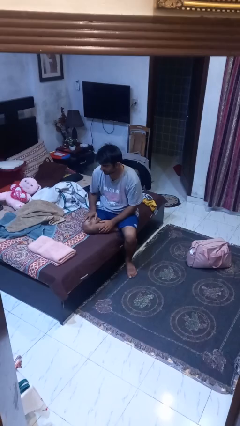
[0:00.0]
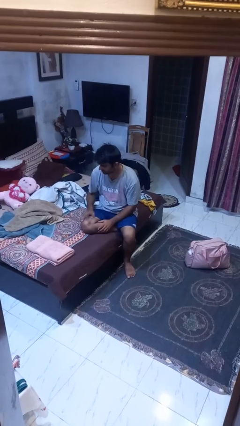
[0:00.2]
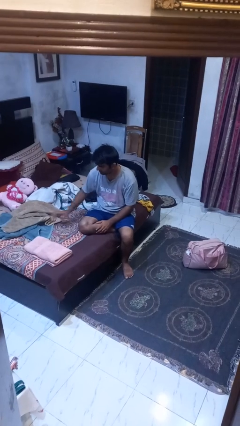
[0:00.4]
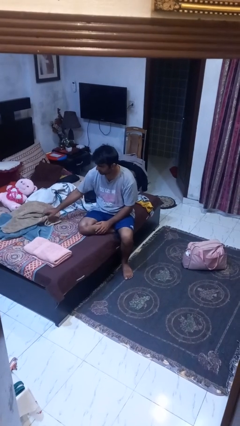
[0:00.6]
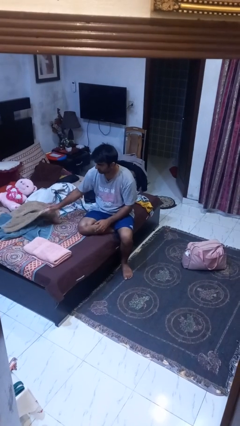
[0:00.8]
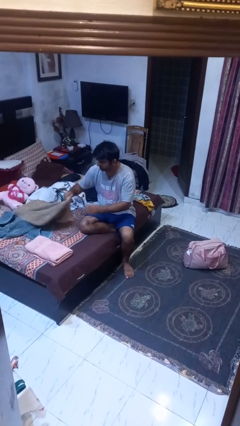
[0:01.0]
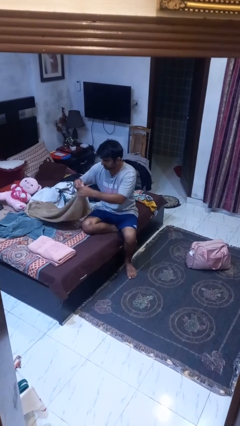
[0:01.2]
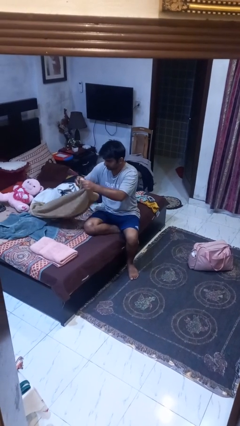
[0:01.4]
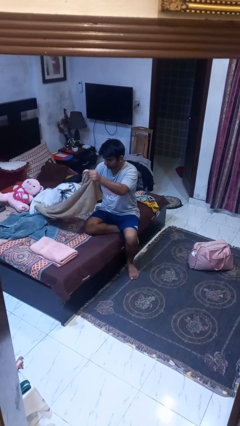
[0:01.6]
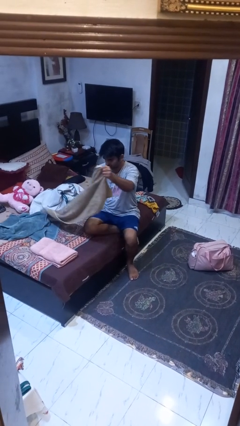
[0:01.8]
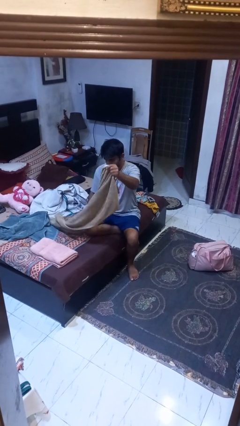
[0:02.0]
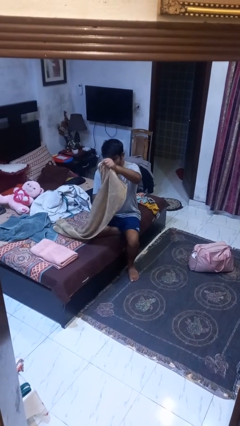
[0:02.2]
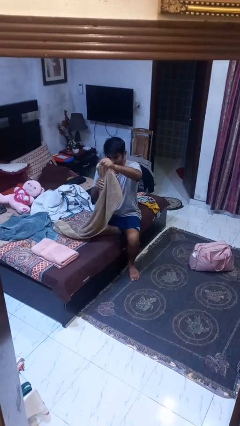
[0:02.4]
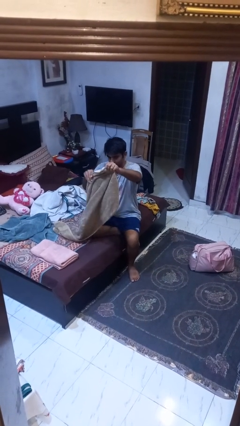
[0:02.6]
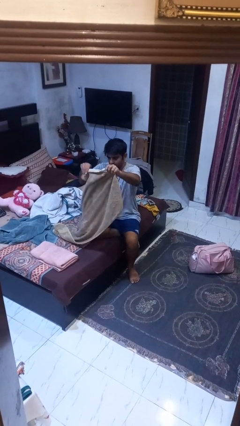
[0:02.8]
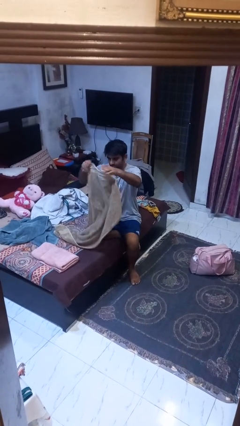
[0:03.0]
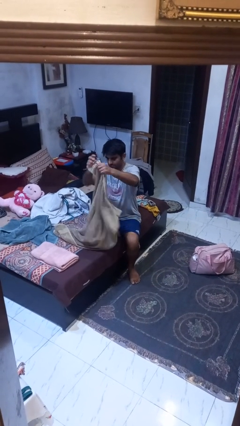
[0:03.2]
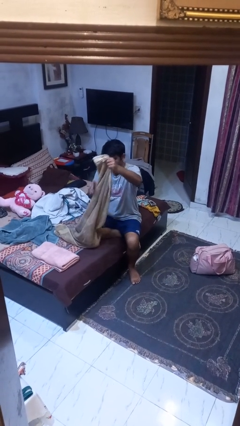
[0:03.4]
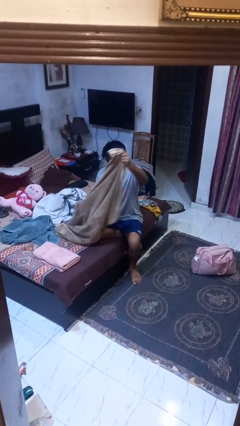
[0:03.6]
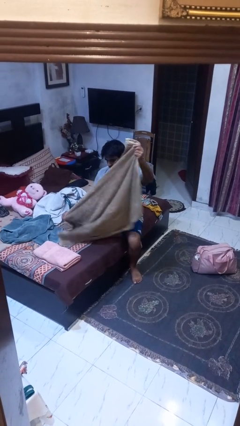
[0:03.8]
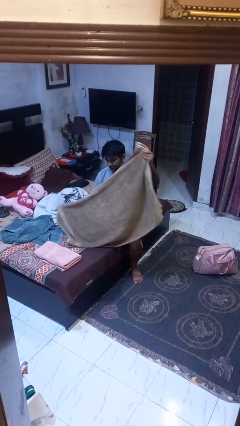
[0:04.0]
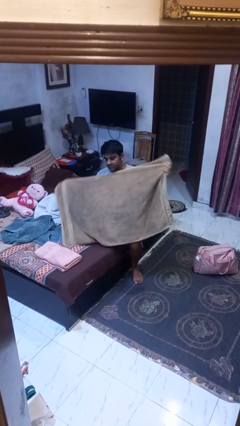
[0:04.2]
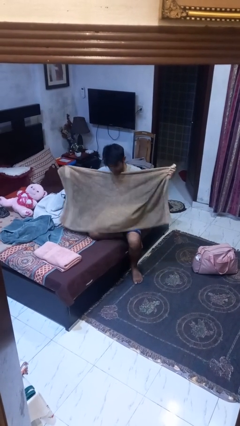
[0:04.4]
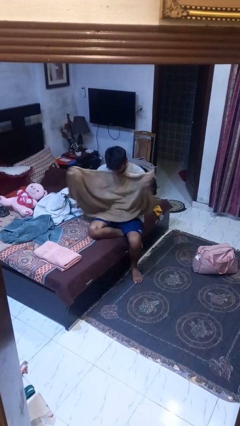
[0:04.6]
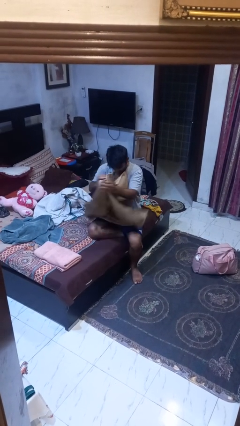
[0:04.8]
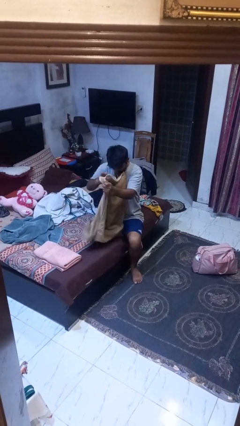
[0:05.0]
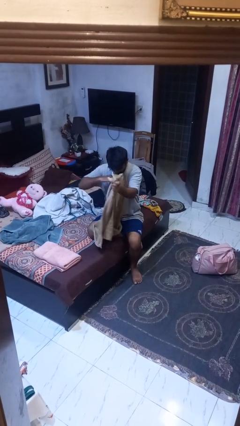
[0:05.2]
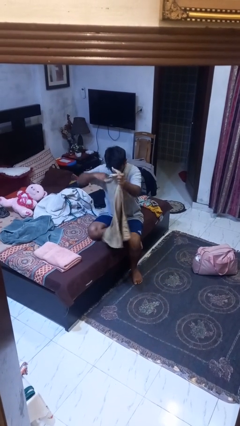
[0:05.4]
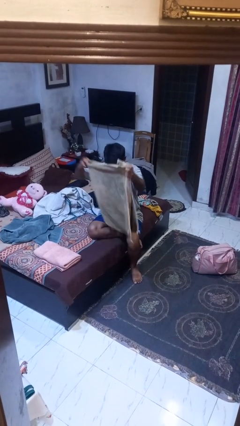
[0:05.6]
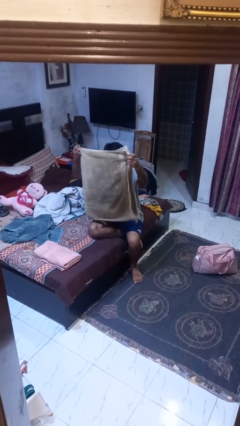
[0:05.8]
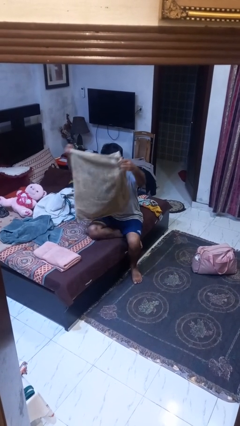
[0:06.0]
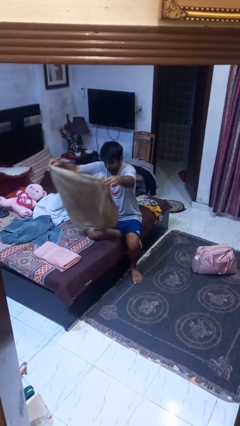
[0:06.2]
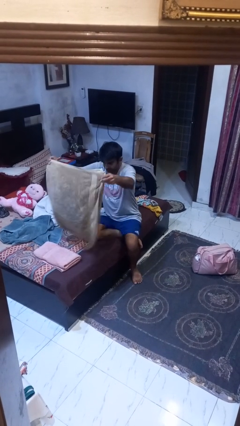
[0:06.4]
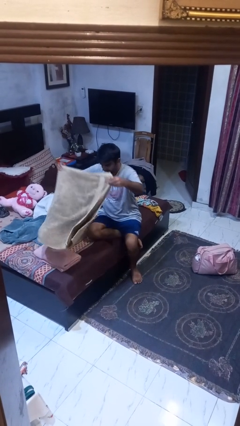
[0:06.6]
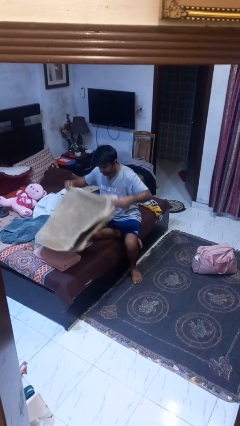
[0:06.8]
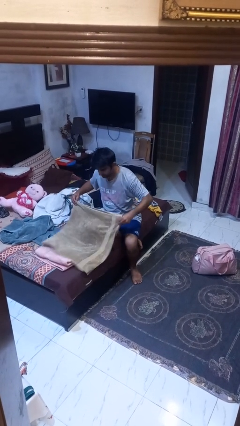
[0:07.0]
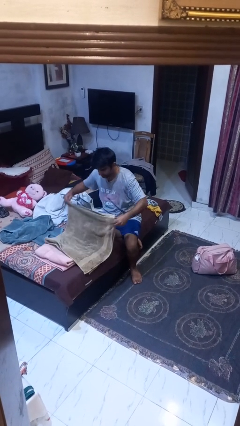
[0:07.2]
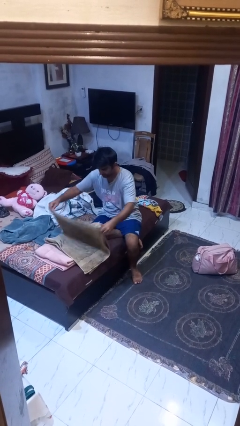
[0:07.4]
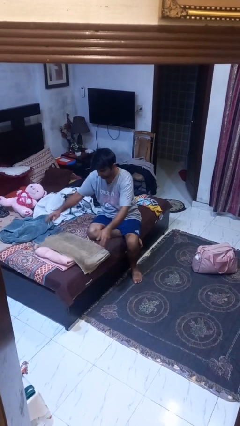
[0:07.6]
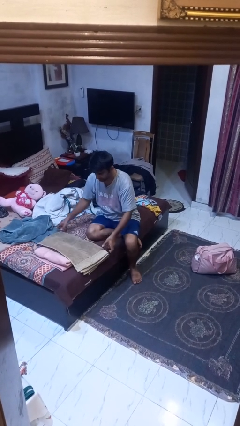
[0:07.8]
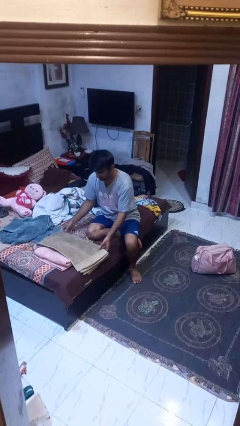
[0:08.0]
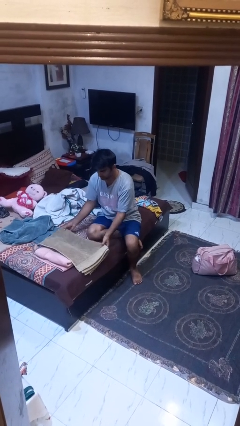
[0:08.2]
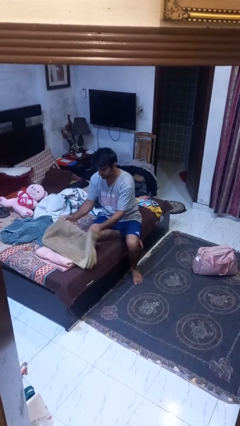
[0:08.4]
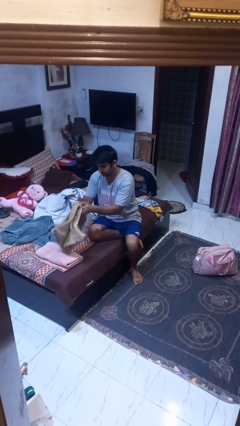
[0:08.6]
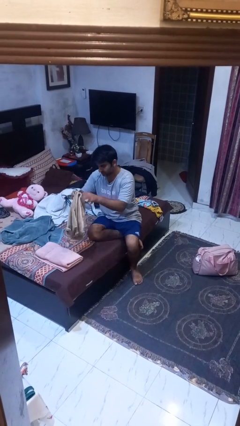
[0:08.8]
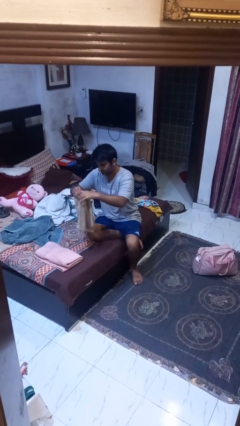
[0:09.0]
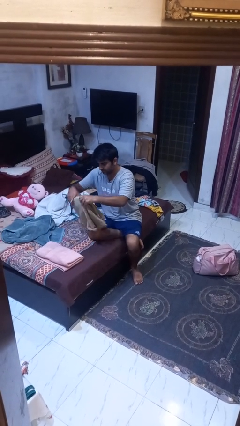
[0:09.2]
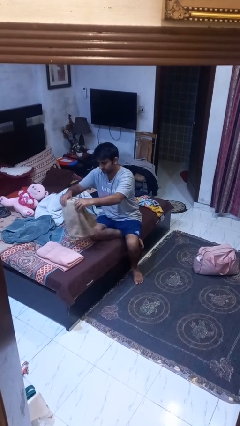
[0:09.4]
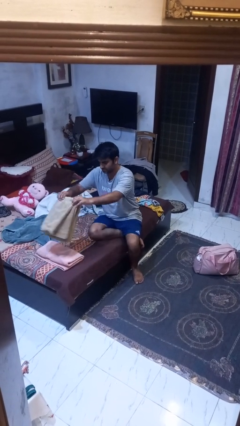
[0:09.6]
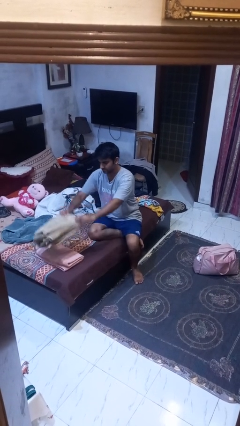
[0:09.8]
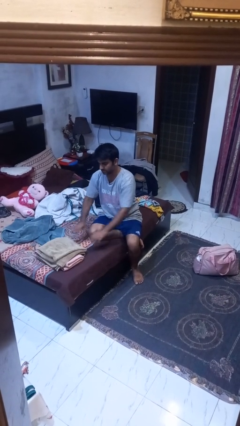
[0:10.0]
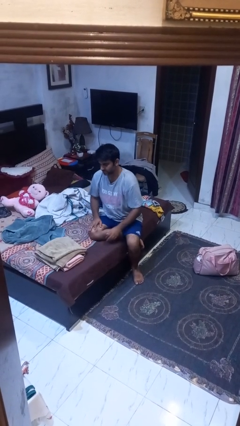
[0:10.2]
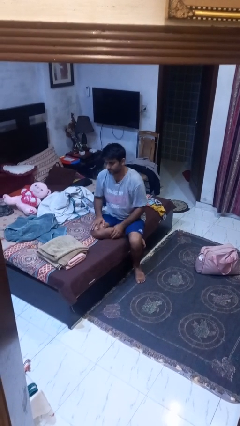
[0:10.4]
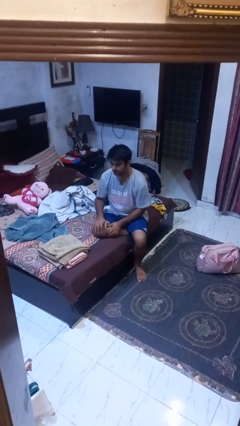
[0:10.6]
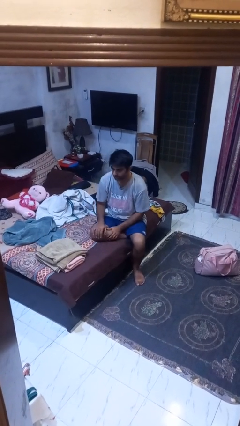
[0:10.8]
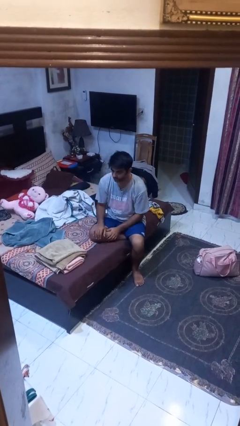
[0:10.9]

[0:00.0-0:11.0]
person folds towel

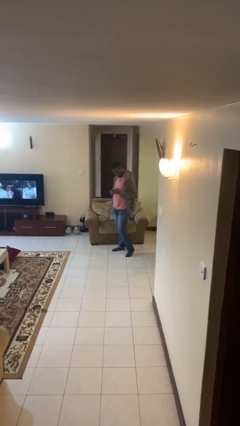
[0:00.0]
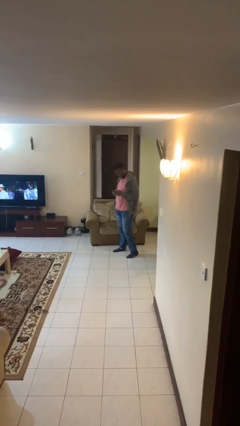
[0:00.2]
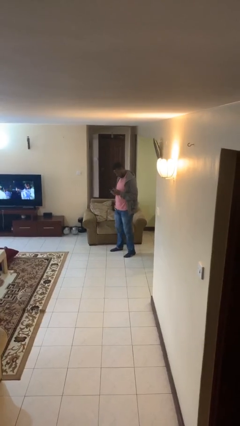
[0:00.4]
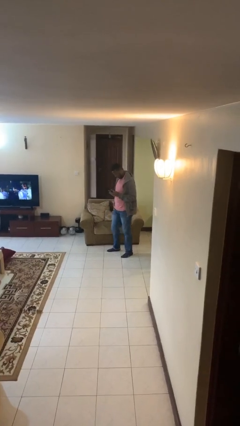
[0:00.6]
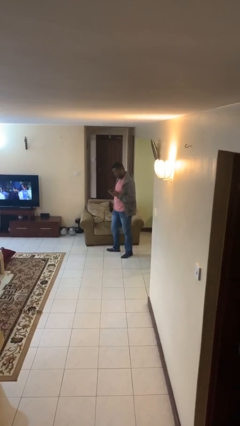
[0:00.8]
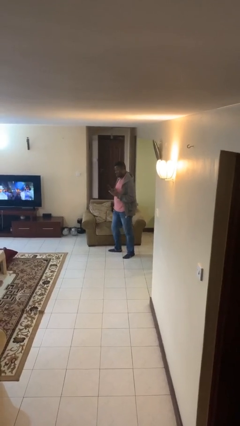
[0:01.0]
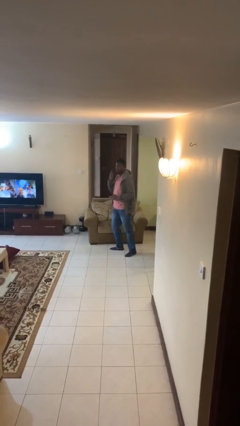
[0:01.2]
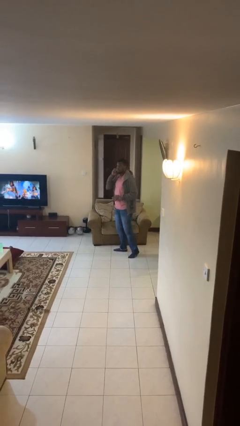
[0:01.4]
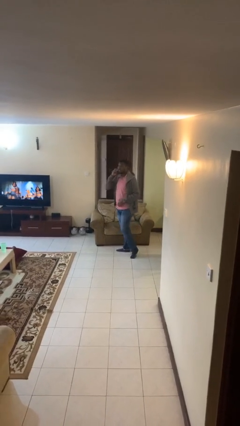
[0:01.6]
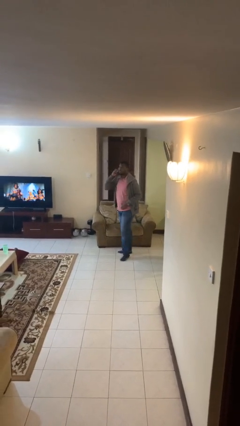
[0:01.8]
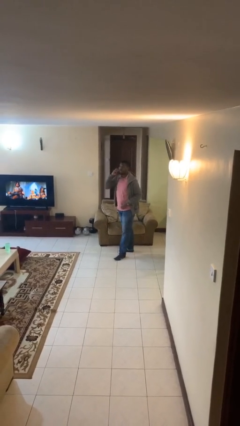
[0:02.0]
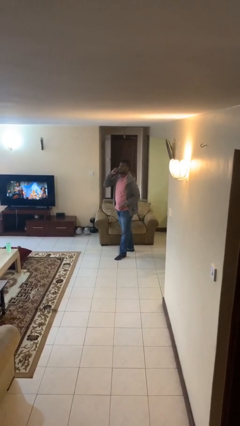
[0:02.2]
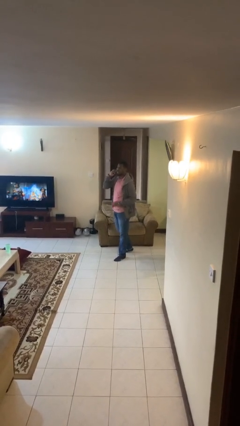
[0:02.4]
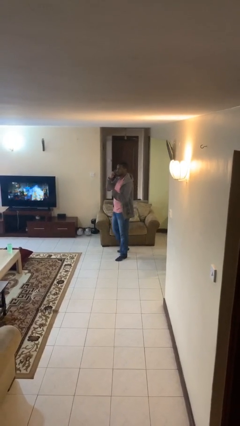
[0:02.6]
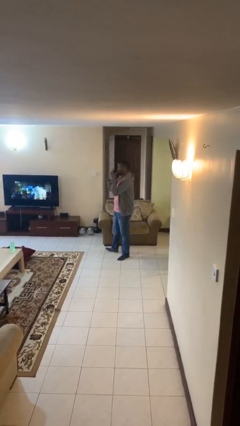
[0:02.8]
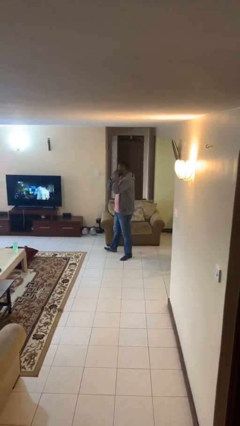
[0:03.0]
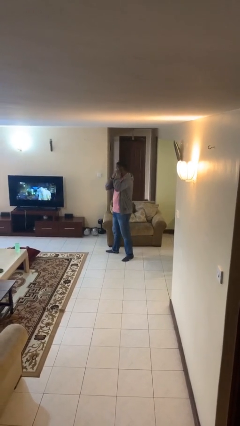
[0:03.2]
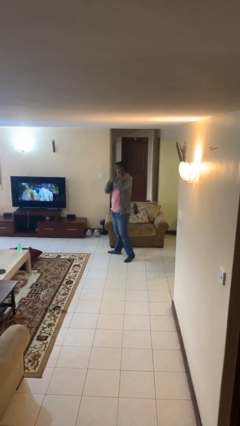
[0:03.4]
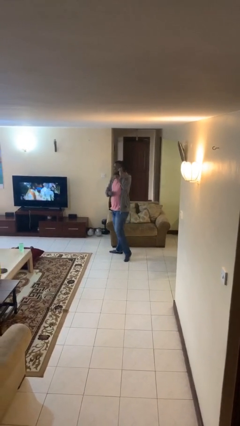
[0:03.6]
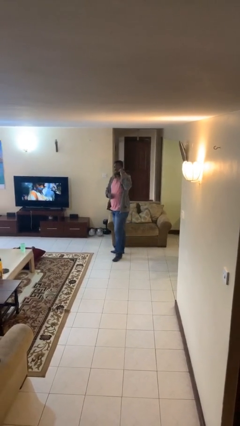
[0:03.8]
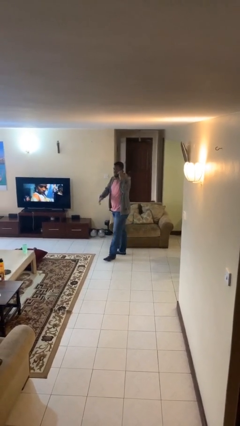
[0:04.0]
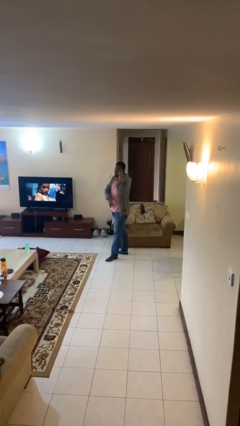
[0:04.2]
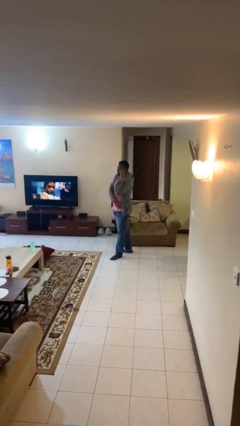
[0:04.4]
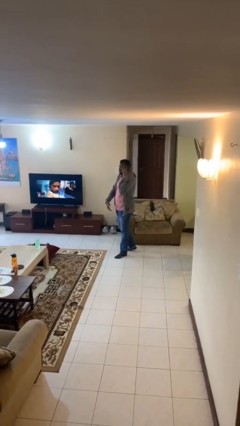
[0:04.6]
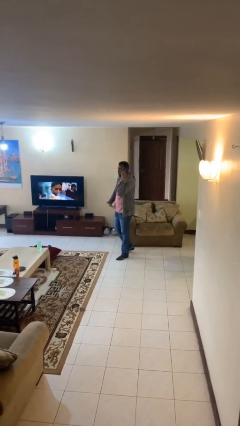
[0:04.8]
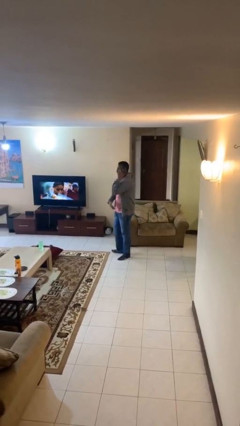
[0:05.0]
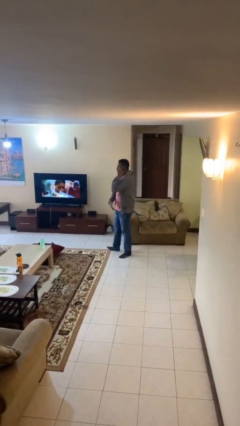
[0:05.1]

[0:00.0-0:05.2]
person talks on phone

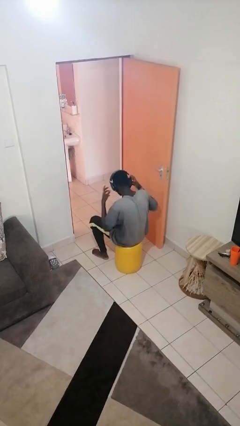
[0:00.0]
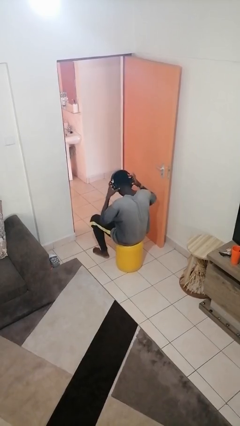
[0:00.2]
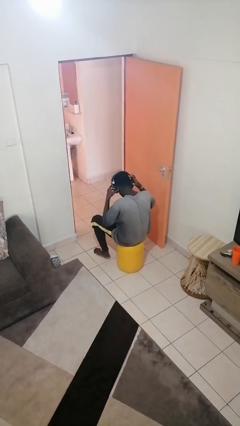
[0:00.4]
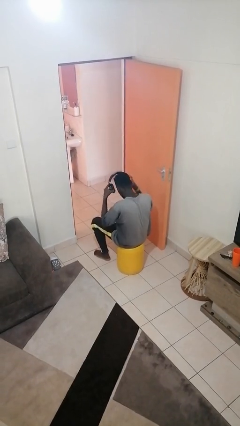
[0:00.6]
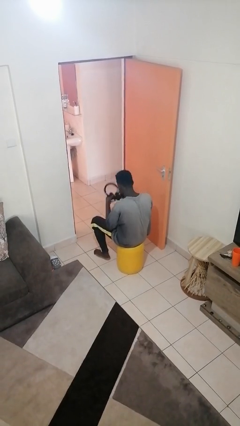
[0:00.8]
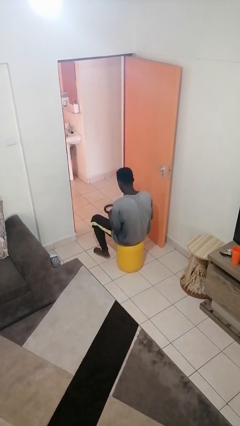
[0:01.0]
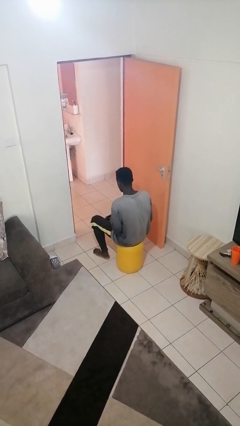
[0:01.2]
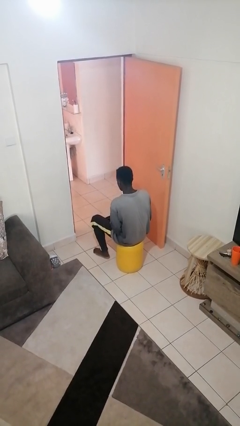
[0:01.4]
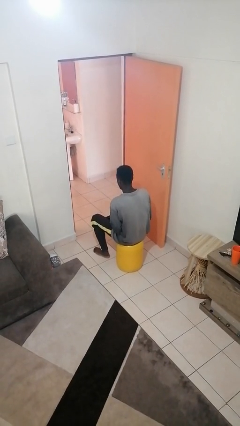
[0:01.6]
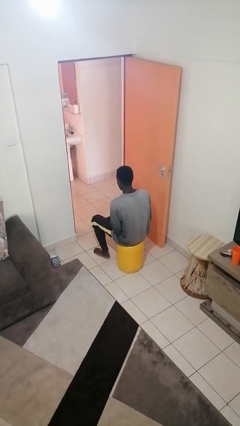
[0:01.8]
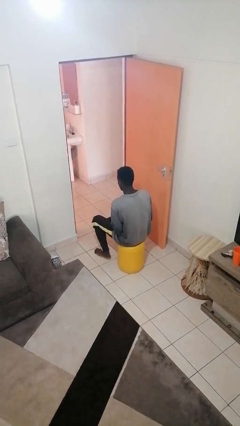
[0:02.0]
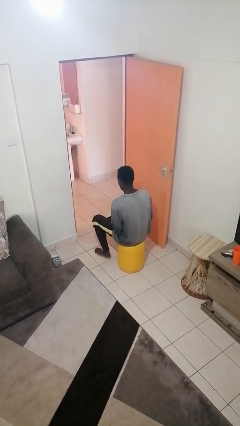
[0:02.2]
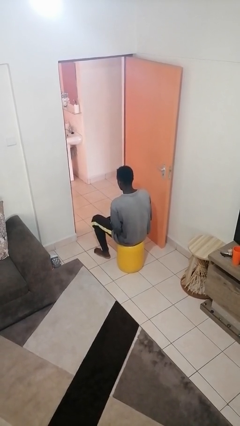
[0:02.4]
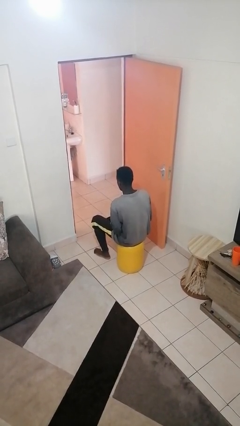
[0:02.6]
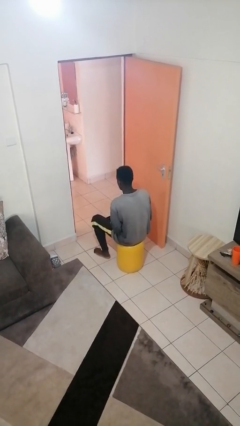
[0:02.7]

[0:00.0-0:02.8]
person takes off headphones
